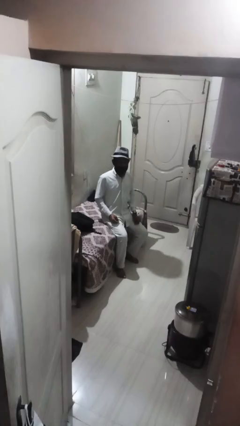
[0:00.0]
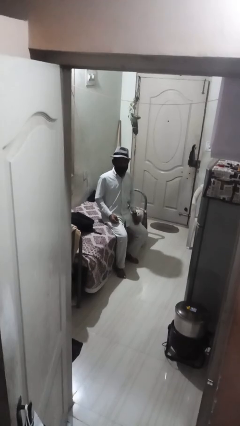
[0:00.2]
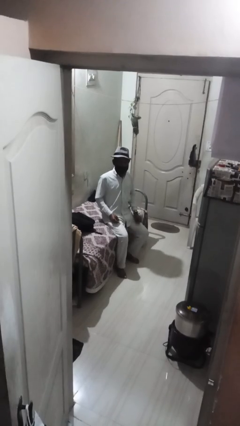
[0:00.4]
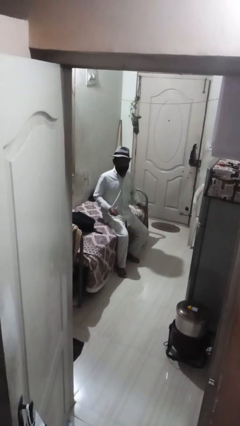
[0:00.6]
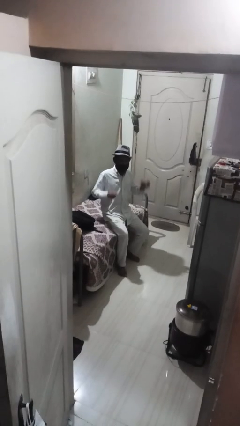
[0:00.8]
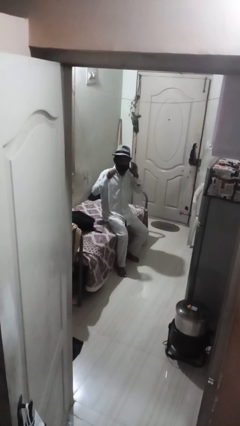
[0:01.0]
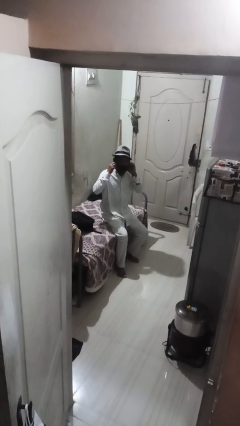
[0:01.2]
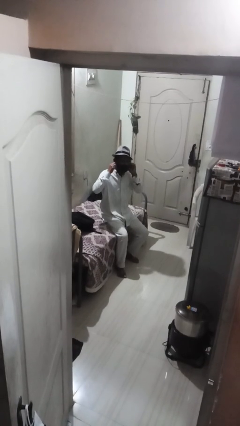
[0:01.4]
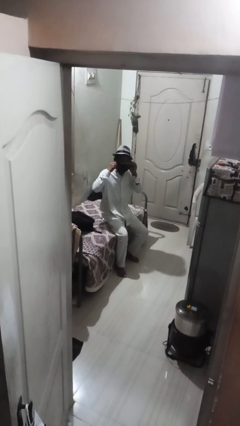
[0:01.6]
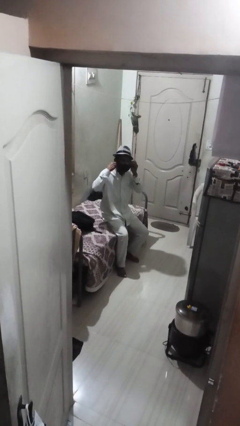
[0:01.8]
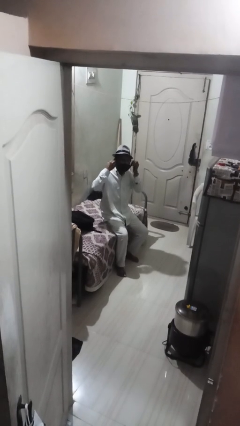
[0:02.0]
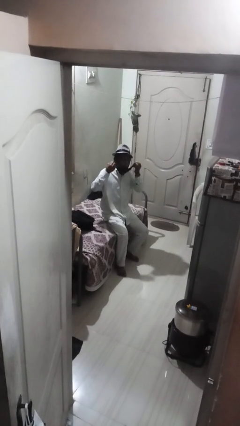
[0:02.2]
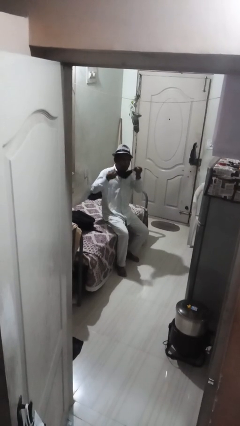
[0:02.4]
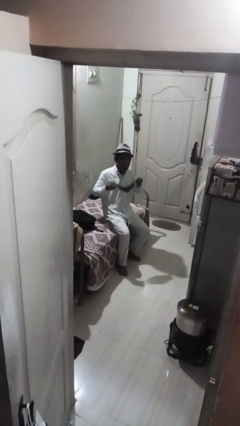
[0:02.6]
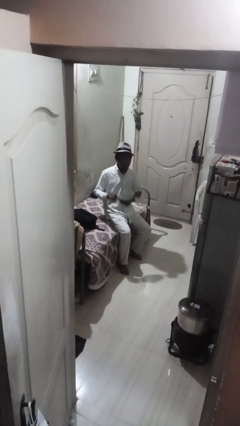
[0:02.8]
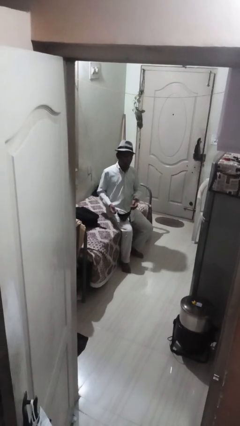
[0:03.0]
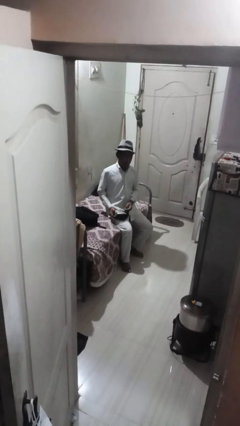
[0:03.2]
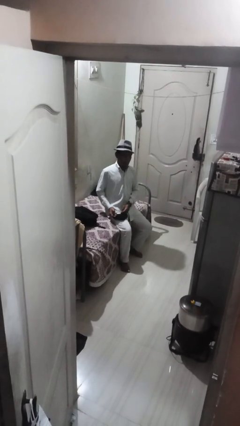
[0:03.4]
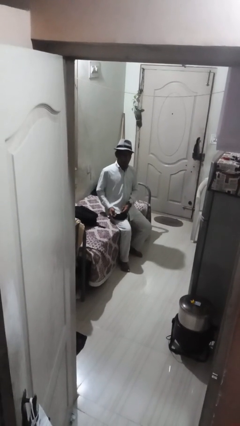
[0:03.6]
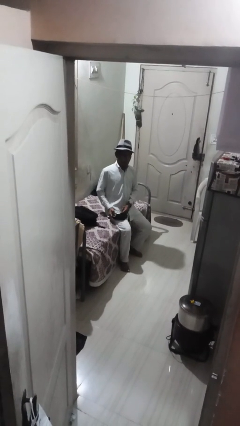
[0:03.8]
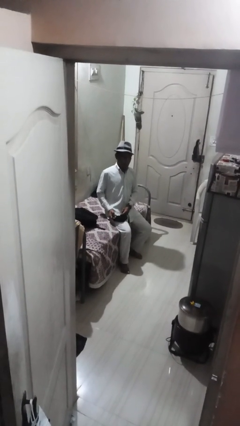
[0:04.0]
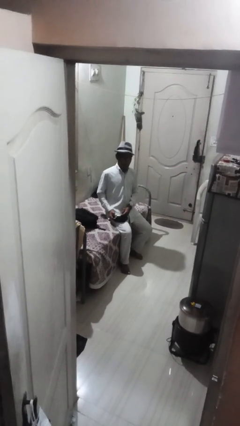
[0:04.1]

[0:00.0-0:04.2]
person takes off facemask

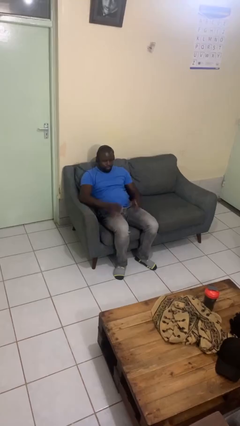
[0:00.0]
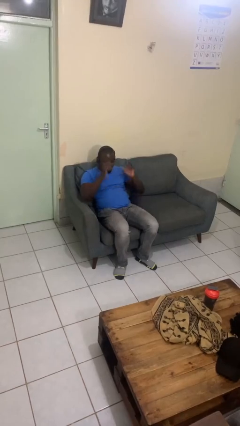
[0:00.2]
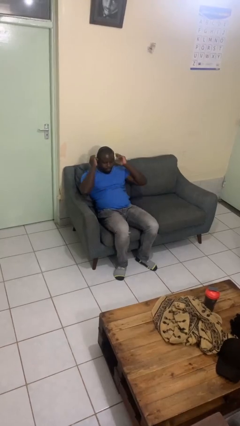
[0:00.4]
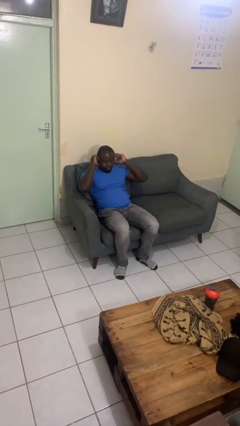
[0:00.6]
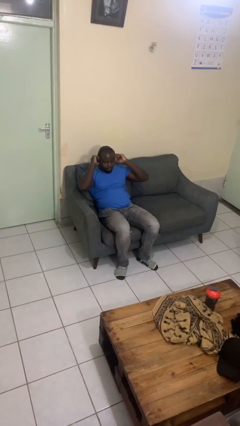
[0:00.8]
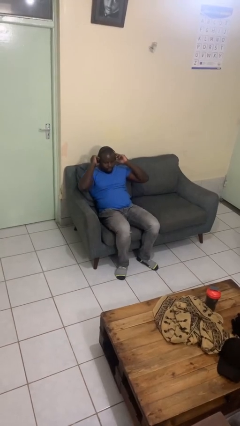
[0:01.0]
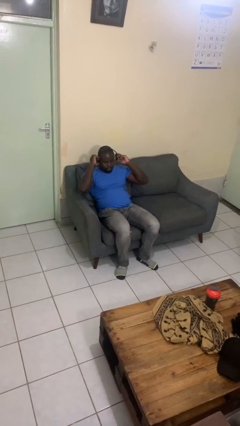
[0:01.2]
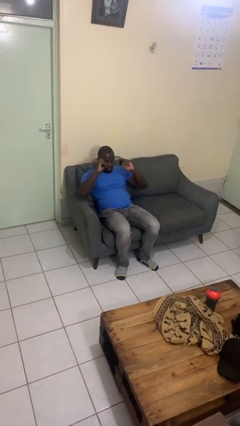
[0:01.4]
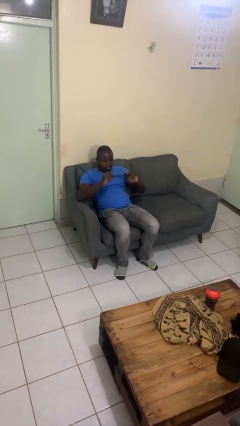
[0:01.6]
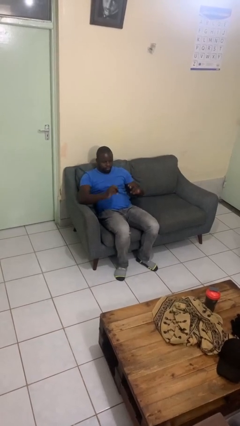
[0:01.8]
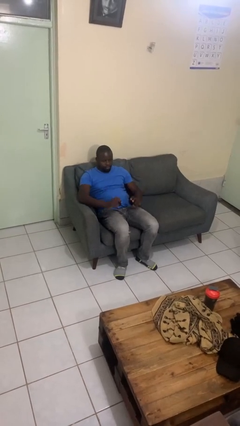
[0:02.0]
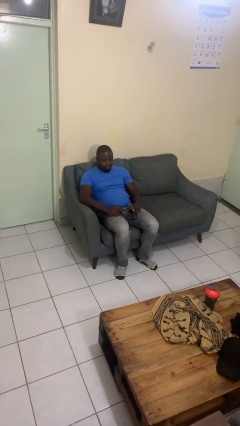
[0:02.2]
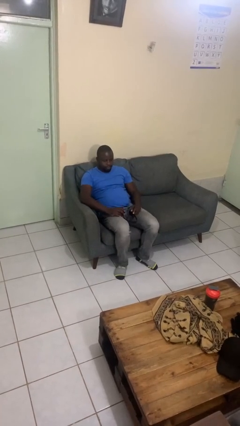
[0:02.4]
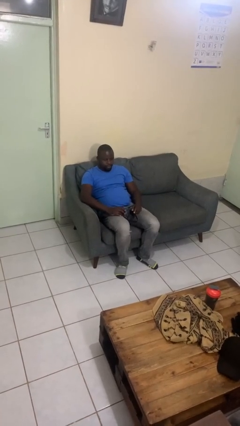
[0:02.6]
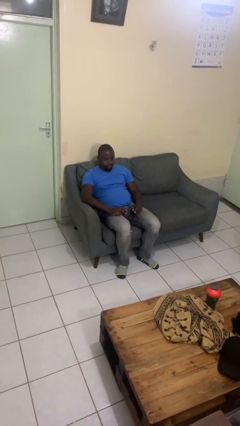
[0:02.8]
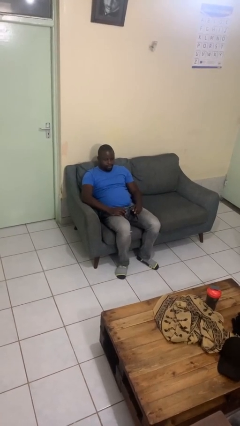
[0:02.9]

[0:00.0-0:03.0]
person takes off headphones

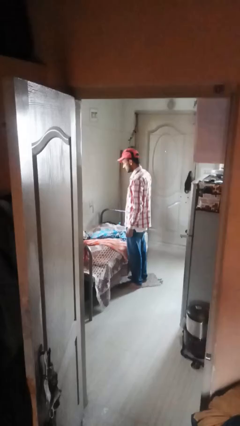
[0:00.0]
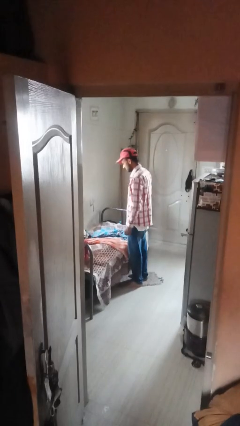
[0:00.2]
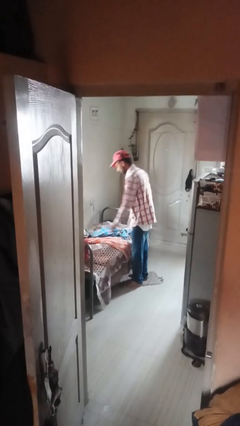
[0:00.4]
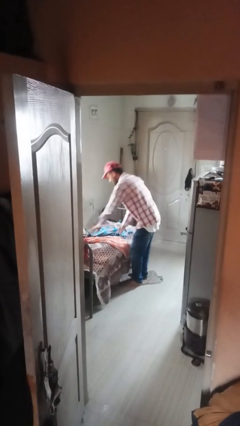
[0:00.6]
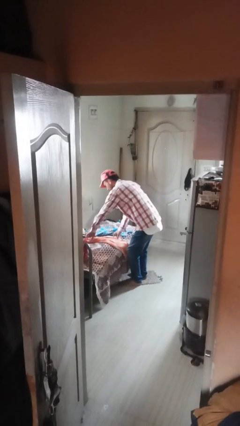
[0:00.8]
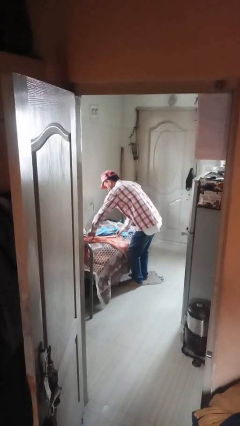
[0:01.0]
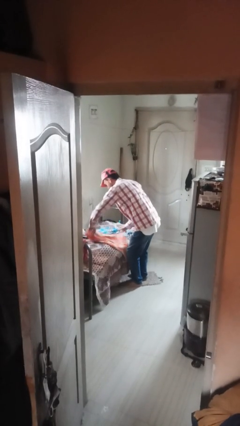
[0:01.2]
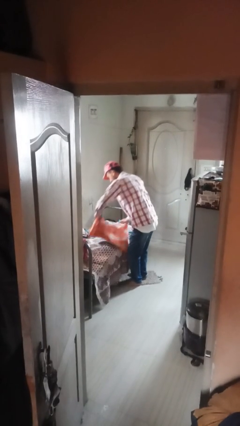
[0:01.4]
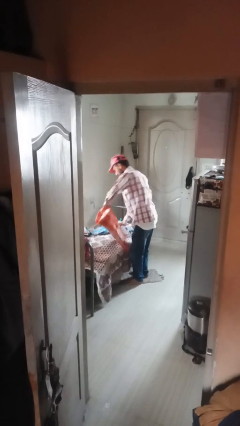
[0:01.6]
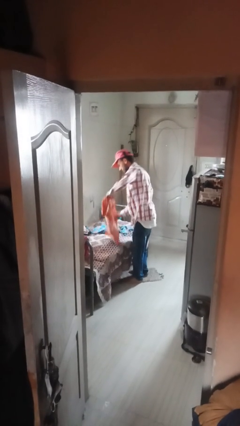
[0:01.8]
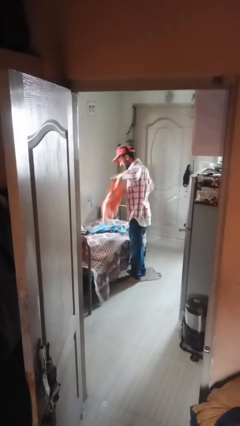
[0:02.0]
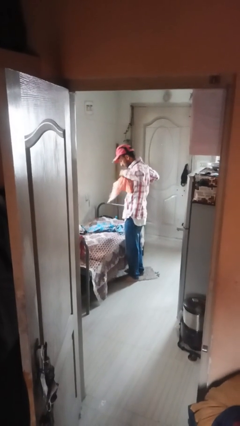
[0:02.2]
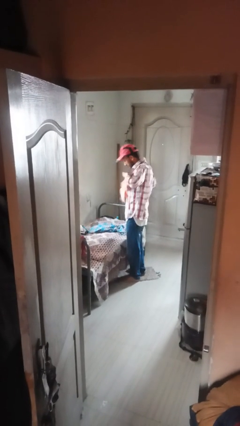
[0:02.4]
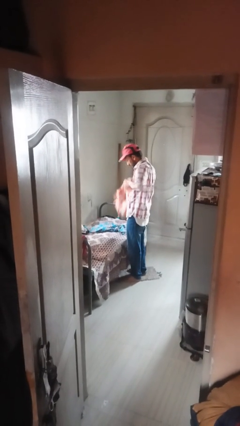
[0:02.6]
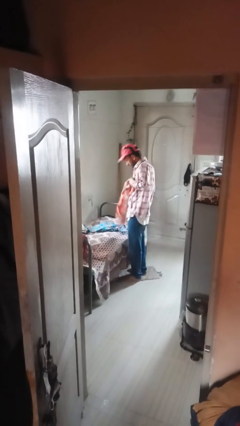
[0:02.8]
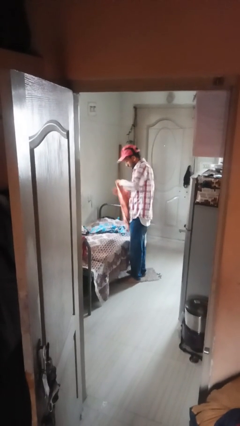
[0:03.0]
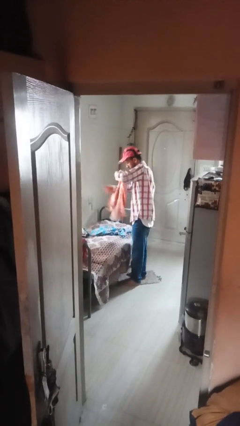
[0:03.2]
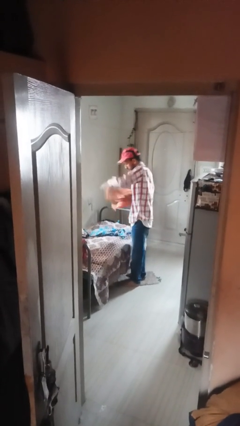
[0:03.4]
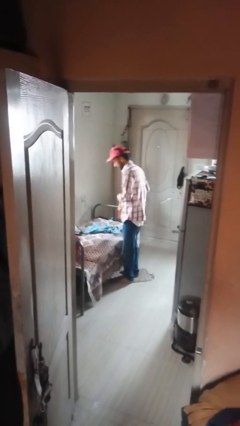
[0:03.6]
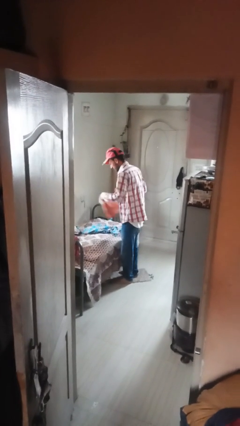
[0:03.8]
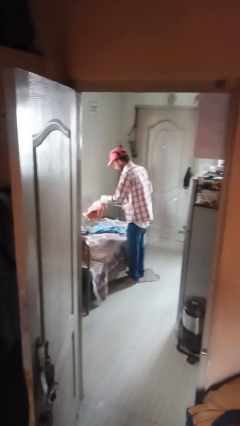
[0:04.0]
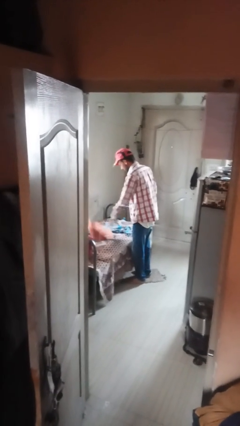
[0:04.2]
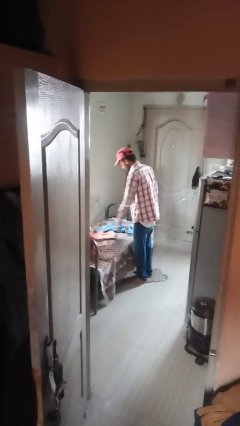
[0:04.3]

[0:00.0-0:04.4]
person folds towel

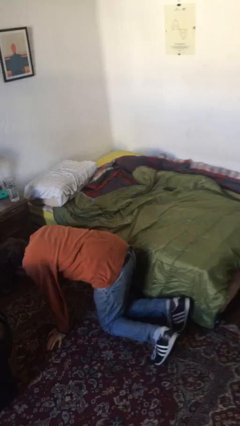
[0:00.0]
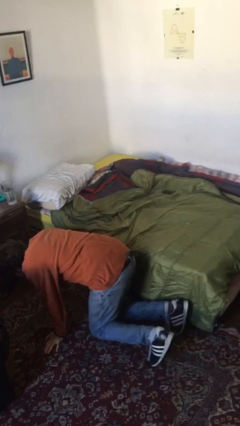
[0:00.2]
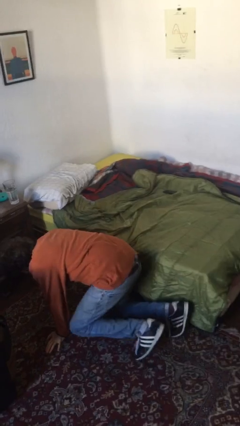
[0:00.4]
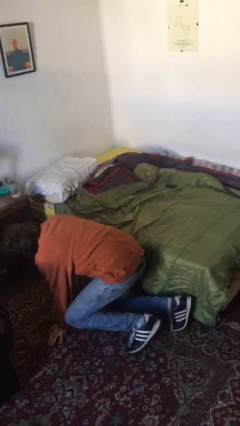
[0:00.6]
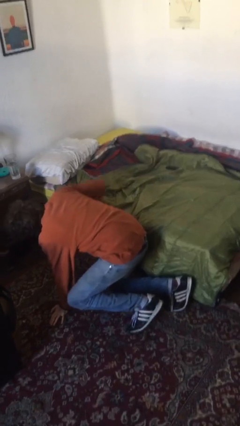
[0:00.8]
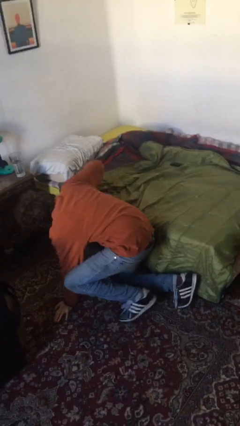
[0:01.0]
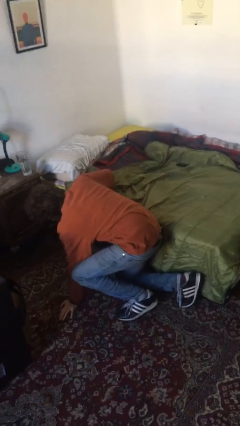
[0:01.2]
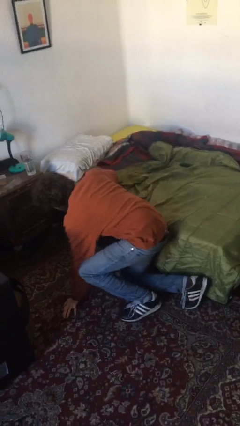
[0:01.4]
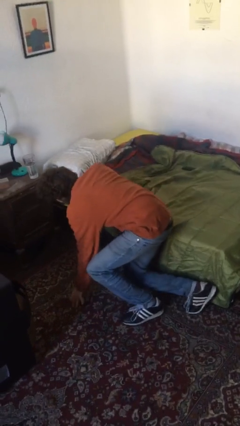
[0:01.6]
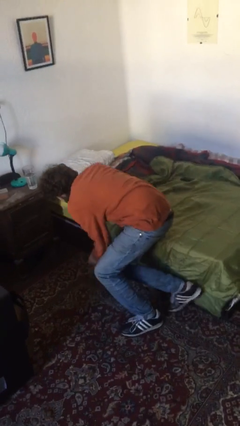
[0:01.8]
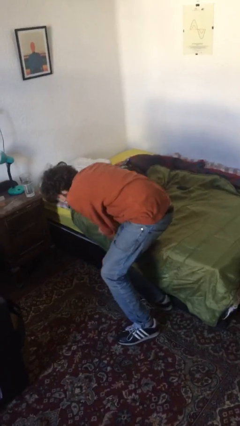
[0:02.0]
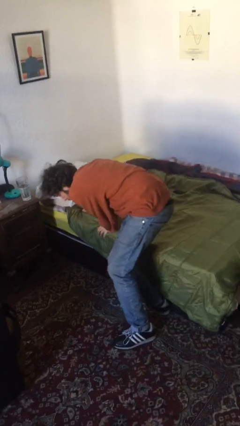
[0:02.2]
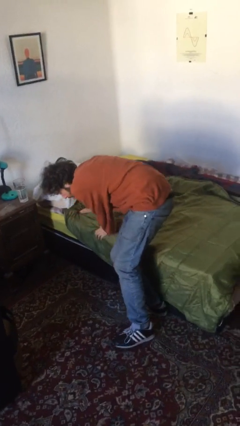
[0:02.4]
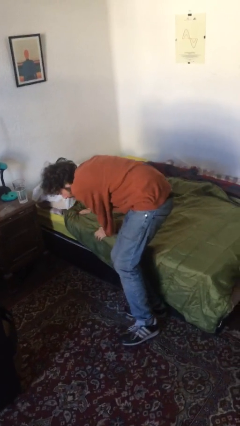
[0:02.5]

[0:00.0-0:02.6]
person stands up from floor

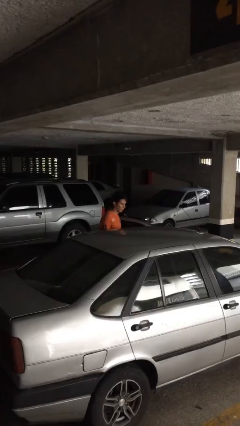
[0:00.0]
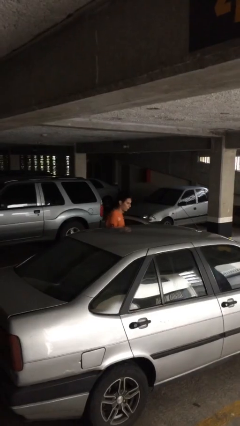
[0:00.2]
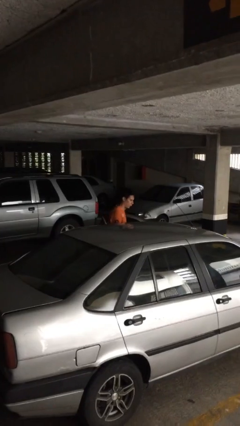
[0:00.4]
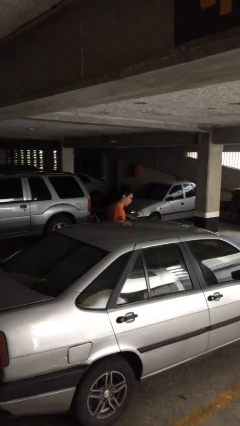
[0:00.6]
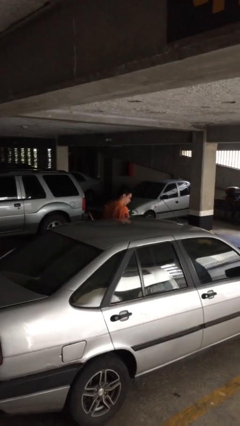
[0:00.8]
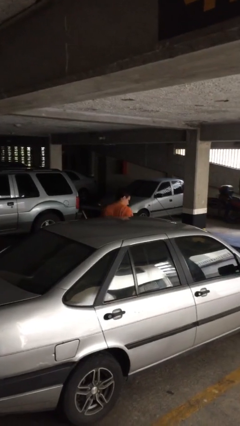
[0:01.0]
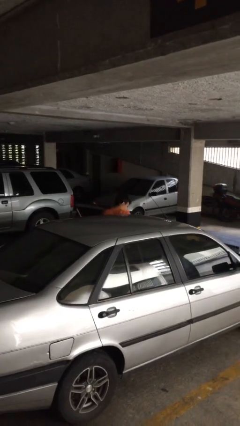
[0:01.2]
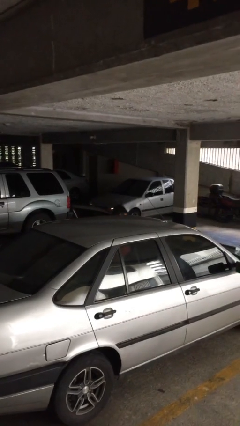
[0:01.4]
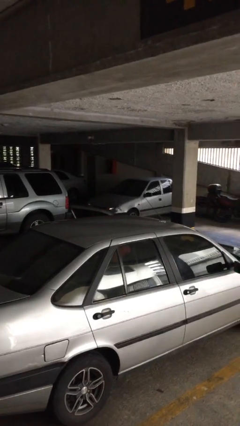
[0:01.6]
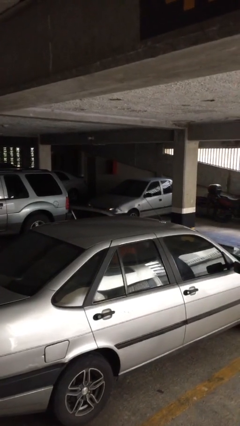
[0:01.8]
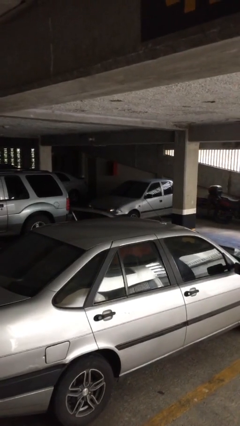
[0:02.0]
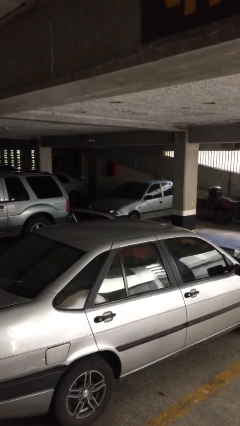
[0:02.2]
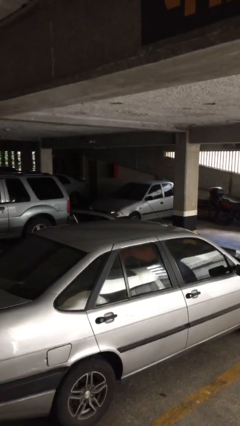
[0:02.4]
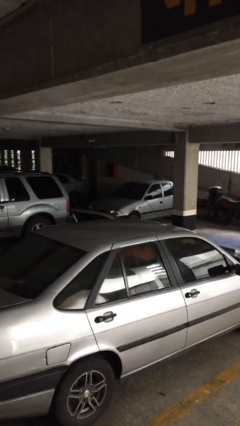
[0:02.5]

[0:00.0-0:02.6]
person enters car

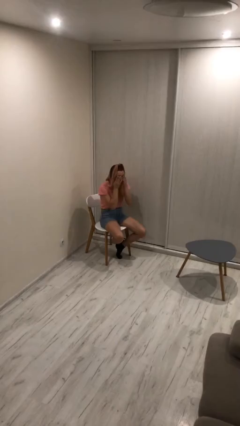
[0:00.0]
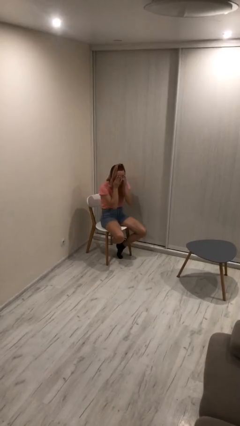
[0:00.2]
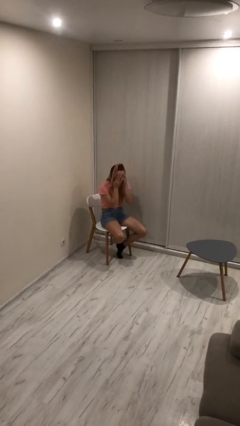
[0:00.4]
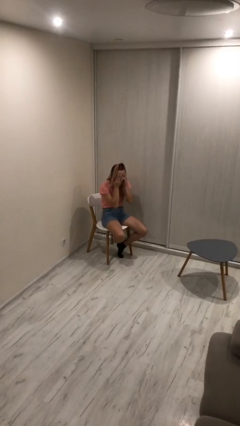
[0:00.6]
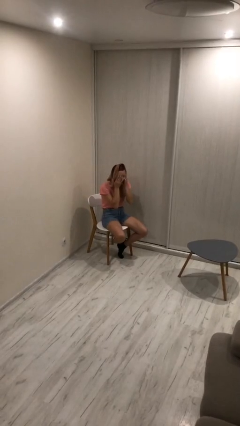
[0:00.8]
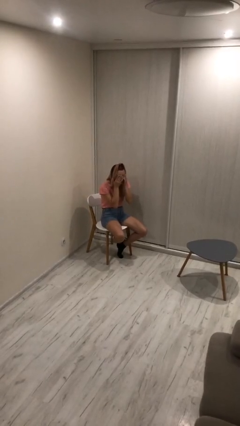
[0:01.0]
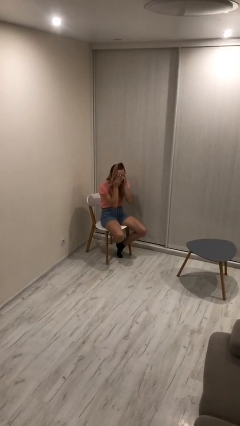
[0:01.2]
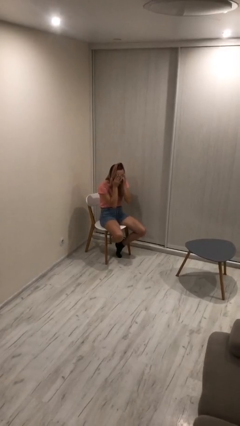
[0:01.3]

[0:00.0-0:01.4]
person rubs eyes
